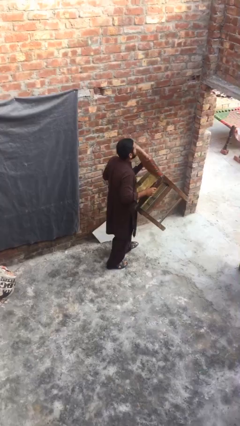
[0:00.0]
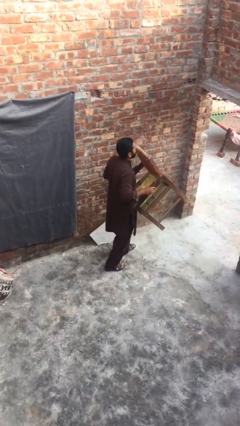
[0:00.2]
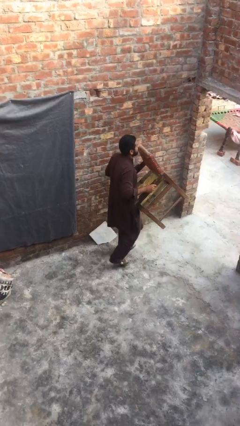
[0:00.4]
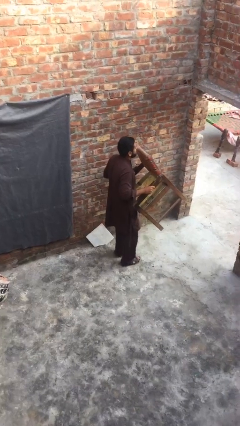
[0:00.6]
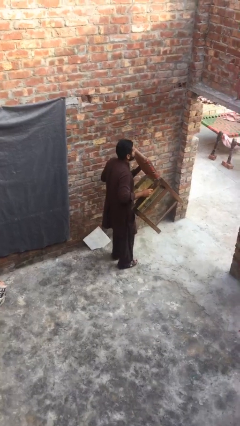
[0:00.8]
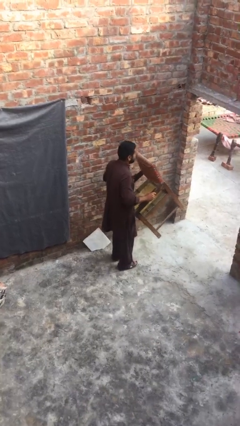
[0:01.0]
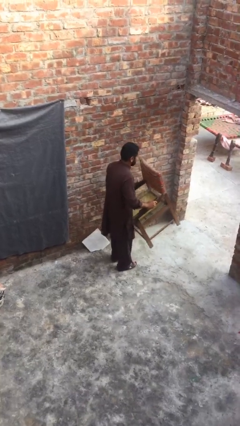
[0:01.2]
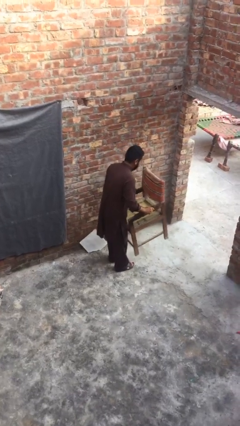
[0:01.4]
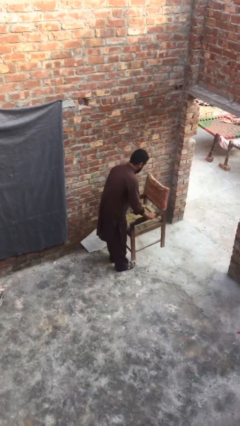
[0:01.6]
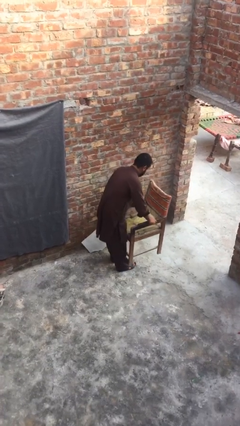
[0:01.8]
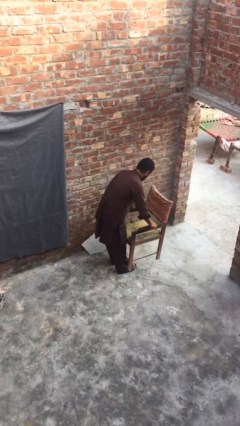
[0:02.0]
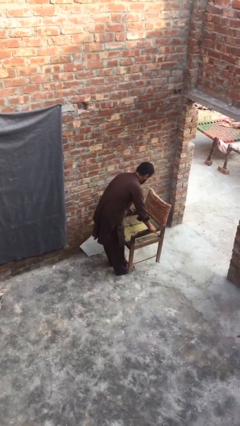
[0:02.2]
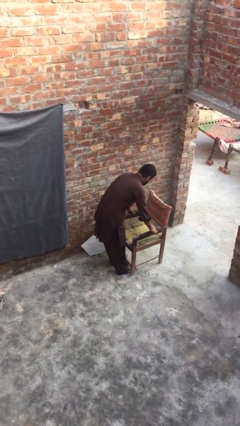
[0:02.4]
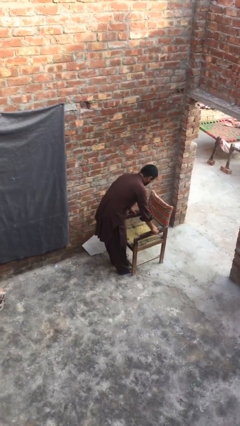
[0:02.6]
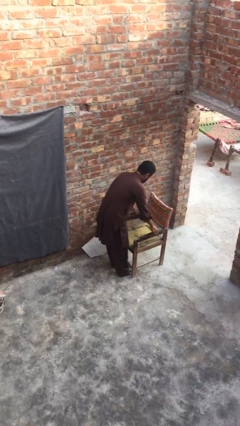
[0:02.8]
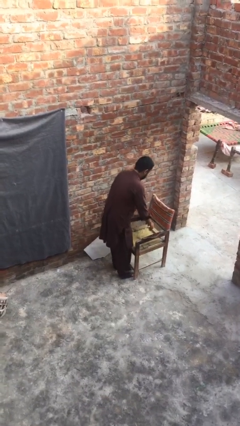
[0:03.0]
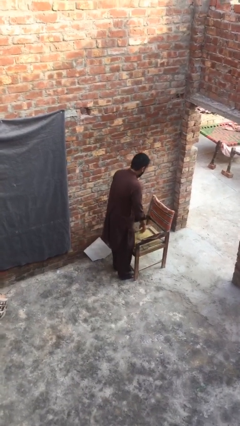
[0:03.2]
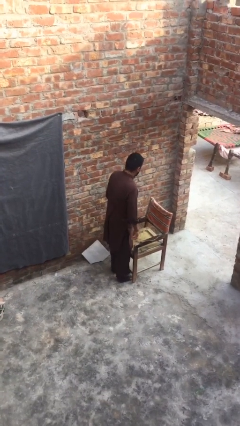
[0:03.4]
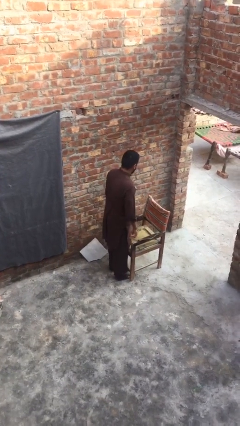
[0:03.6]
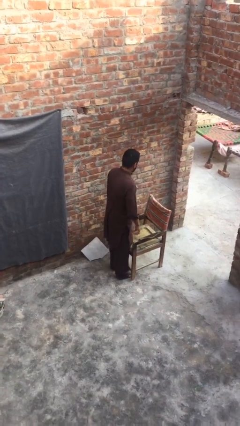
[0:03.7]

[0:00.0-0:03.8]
person puts down object on floor

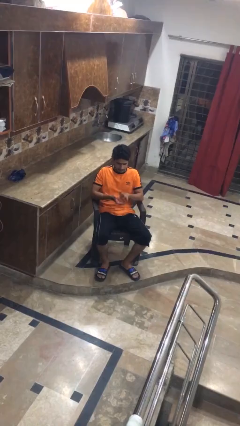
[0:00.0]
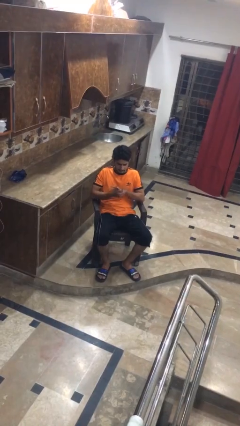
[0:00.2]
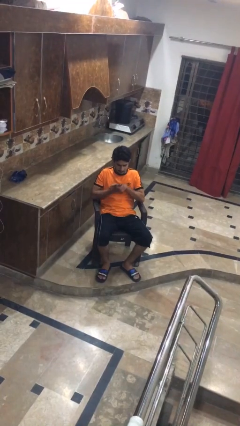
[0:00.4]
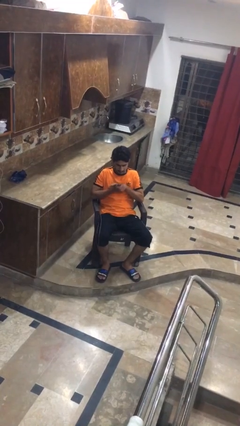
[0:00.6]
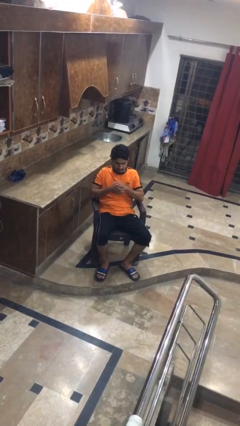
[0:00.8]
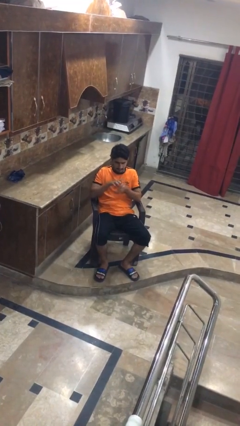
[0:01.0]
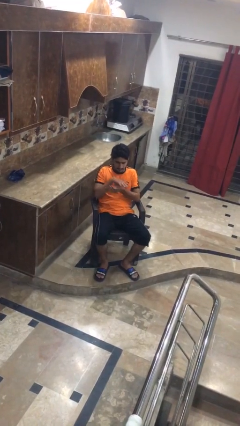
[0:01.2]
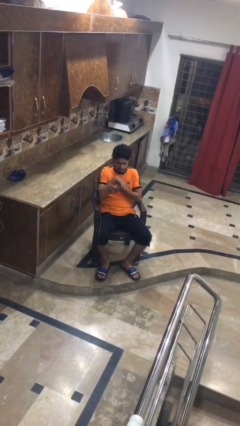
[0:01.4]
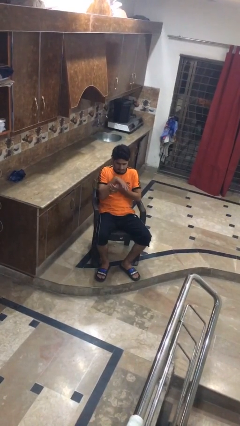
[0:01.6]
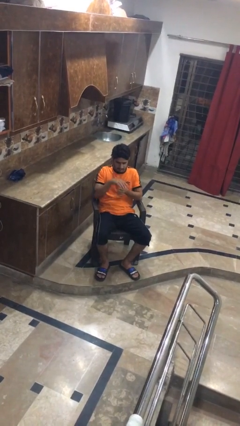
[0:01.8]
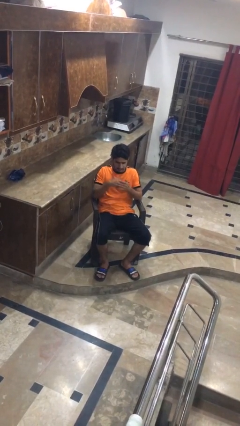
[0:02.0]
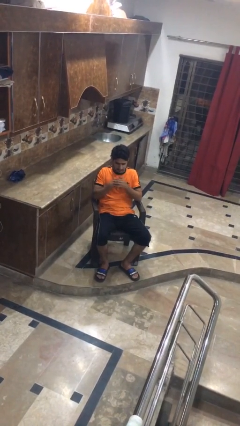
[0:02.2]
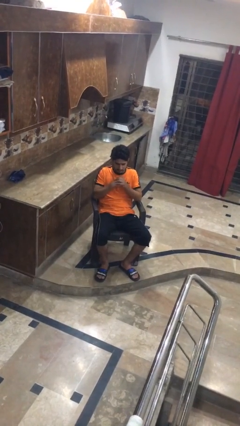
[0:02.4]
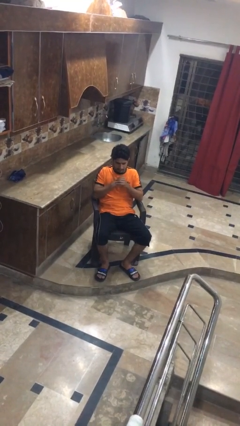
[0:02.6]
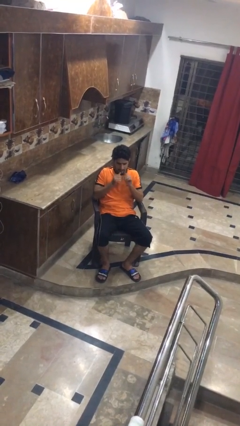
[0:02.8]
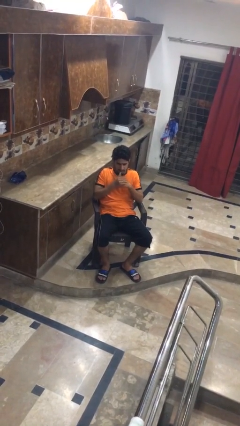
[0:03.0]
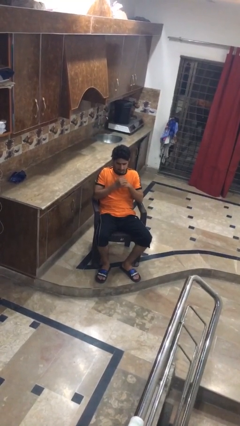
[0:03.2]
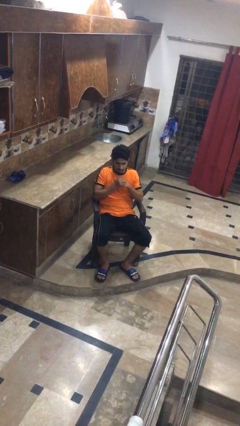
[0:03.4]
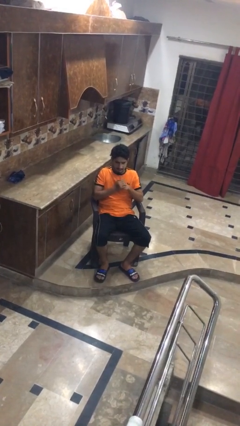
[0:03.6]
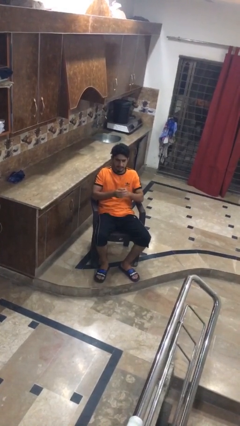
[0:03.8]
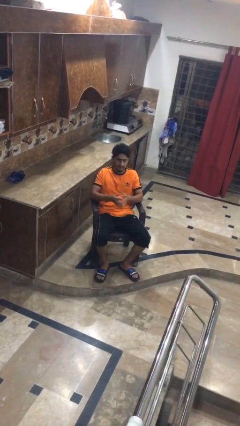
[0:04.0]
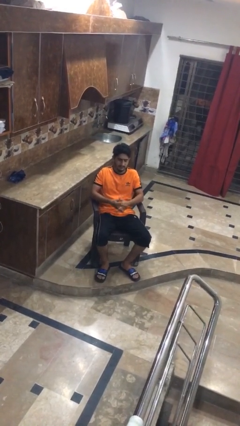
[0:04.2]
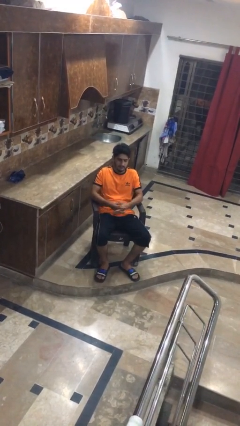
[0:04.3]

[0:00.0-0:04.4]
person cracks knuckles

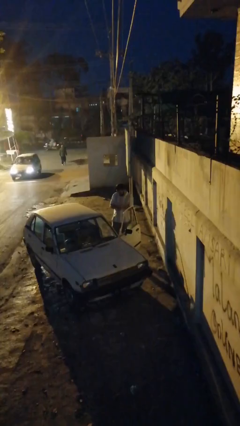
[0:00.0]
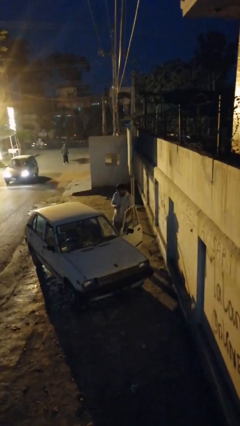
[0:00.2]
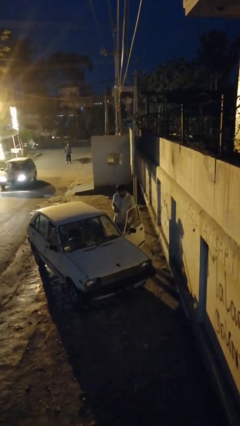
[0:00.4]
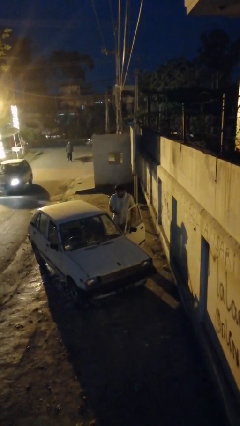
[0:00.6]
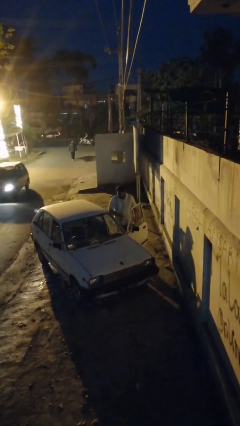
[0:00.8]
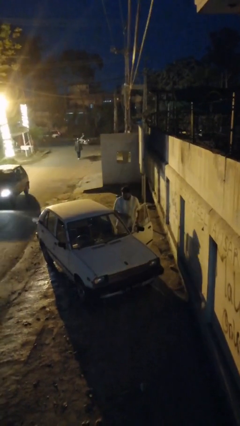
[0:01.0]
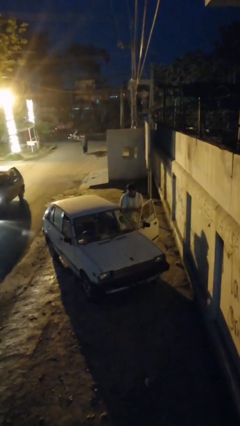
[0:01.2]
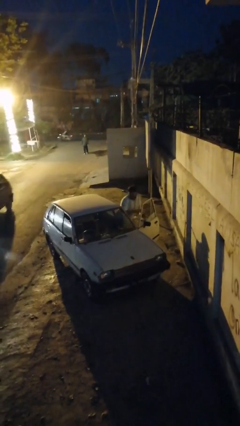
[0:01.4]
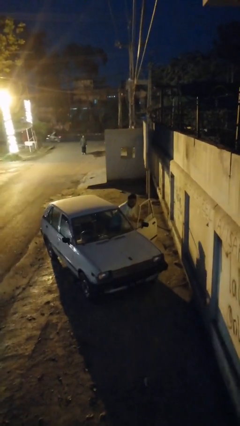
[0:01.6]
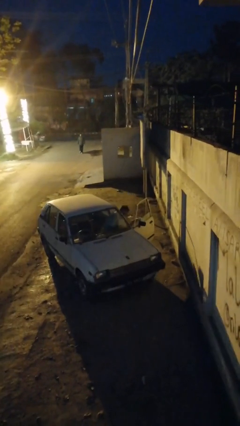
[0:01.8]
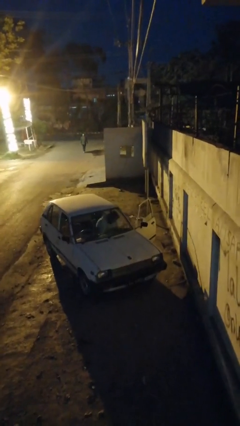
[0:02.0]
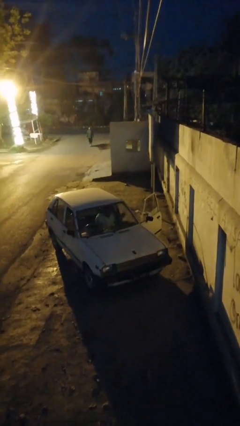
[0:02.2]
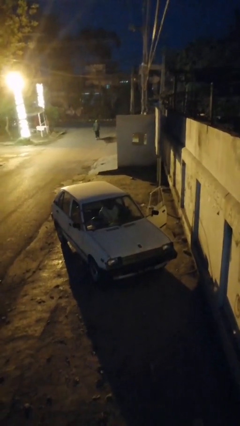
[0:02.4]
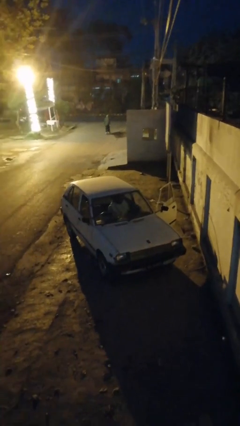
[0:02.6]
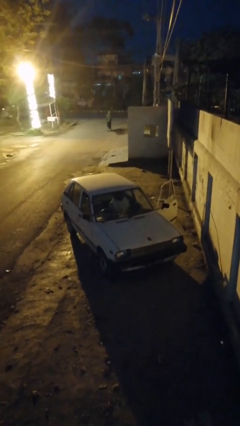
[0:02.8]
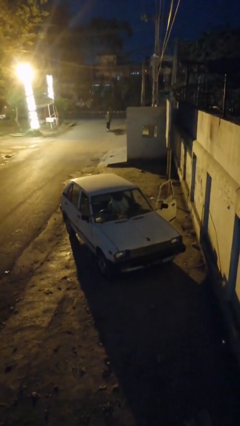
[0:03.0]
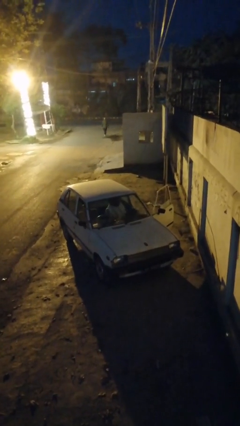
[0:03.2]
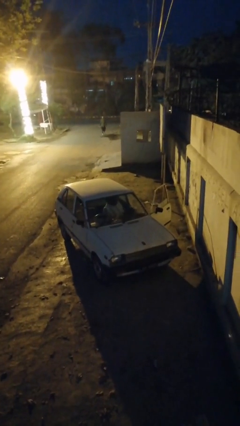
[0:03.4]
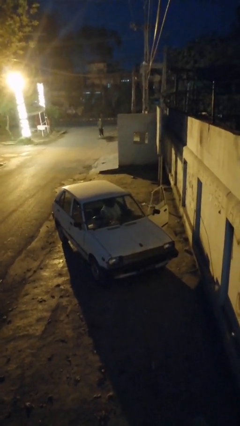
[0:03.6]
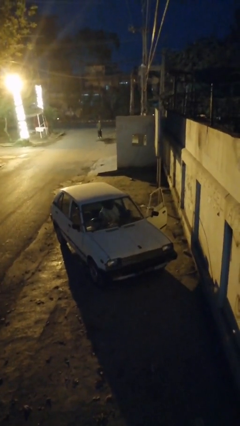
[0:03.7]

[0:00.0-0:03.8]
person enters car

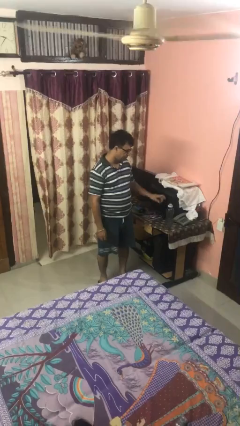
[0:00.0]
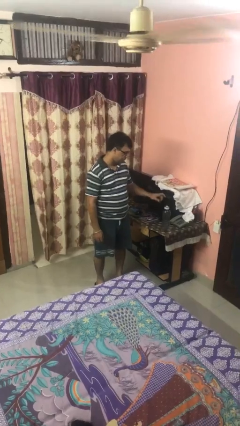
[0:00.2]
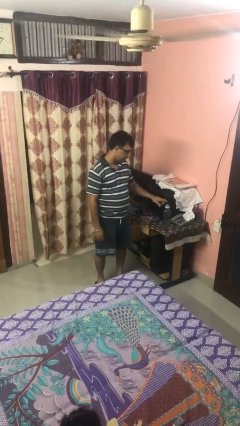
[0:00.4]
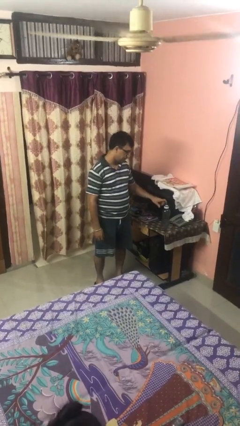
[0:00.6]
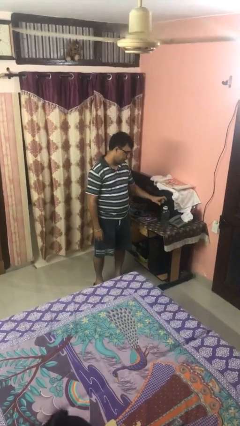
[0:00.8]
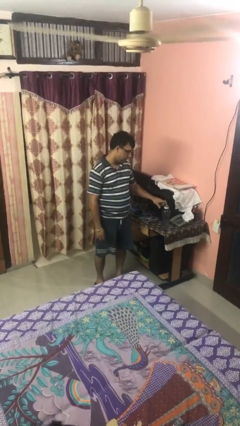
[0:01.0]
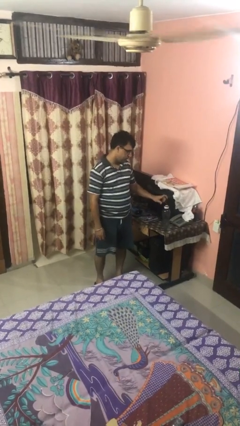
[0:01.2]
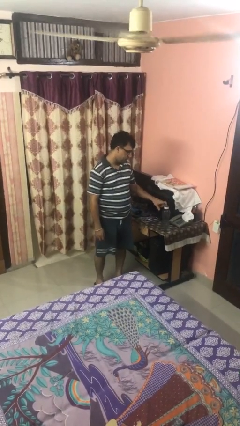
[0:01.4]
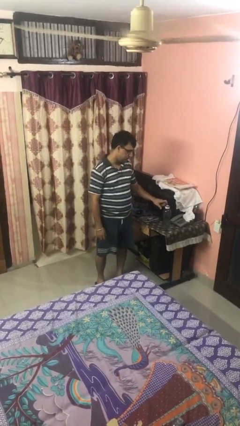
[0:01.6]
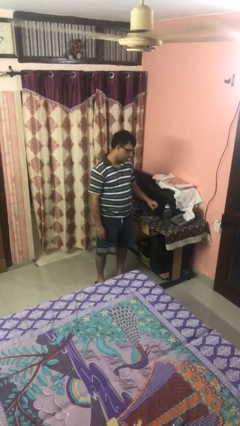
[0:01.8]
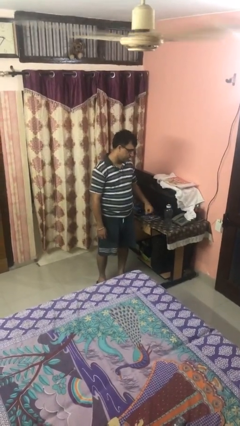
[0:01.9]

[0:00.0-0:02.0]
person taps object with finger

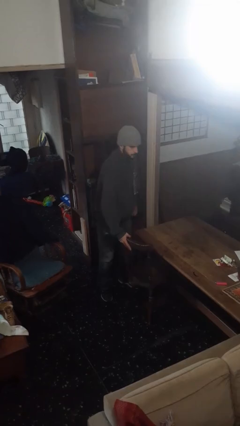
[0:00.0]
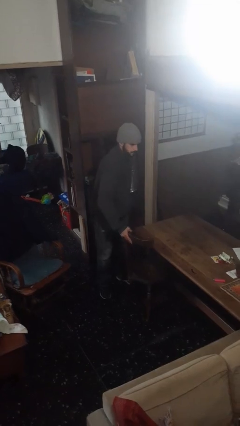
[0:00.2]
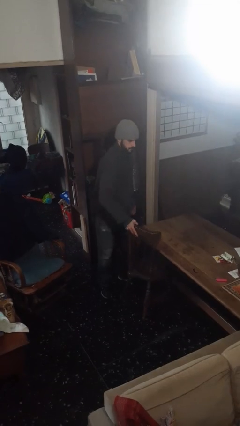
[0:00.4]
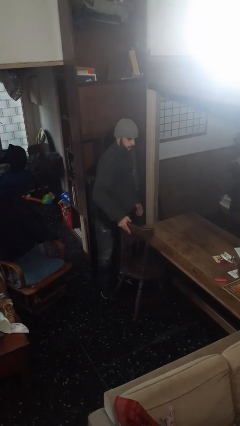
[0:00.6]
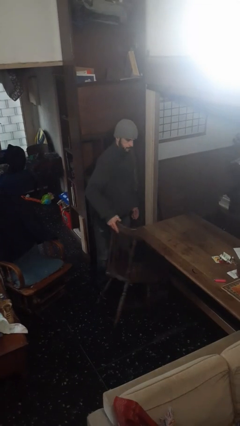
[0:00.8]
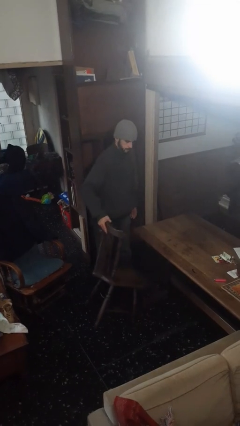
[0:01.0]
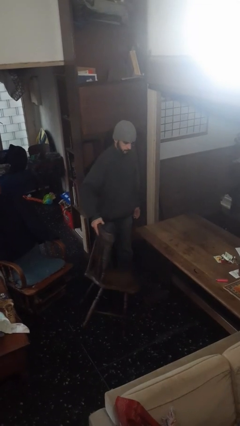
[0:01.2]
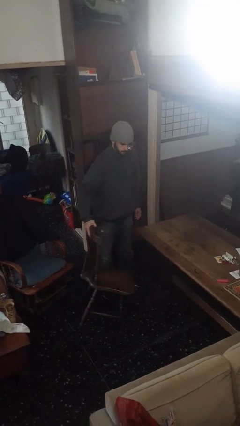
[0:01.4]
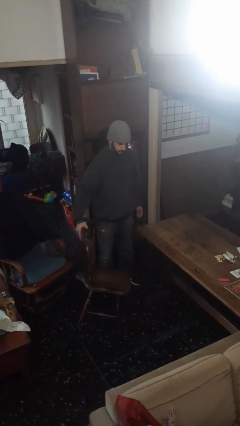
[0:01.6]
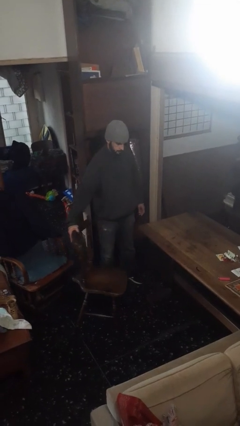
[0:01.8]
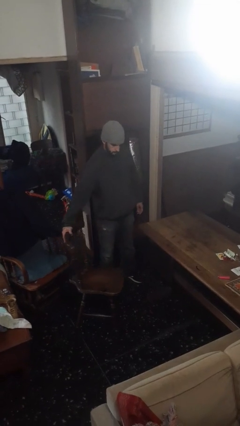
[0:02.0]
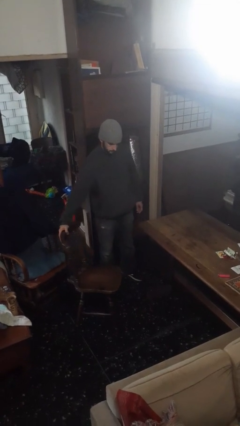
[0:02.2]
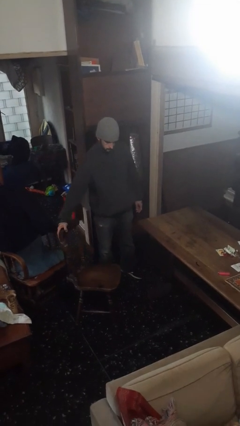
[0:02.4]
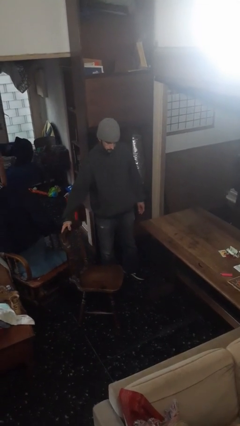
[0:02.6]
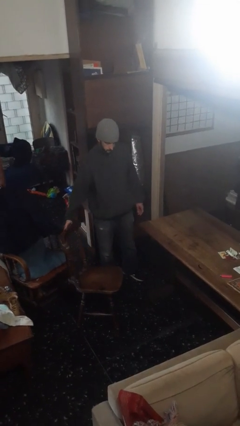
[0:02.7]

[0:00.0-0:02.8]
person pulls out chair

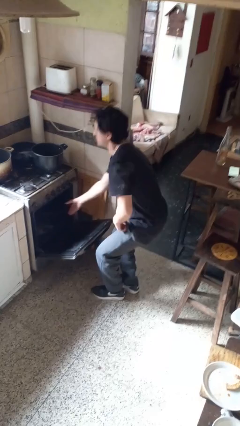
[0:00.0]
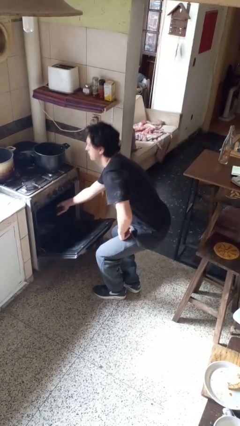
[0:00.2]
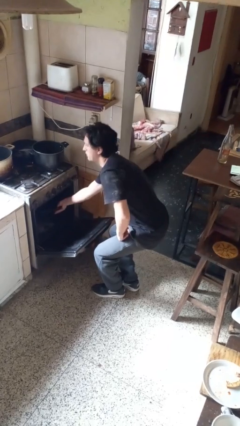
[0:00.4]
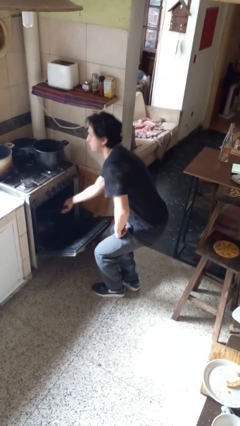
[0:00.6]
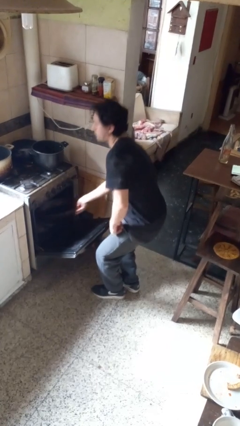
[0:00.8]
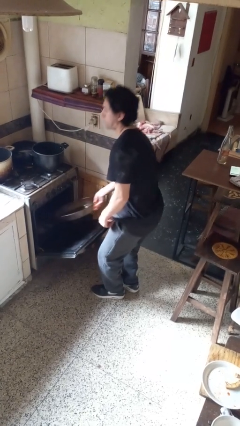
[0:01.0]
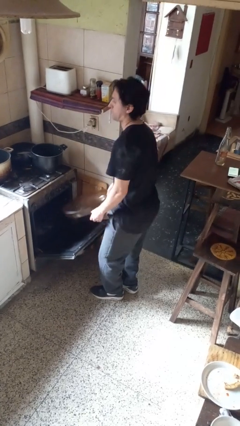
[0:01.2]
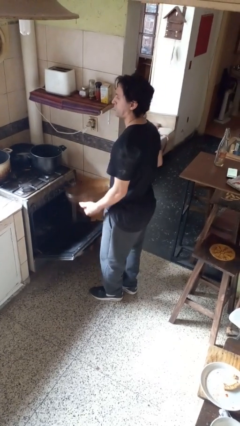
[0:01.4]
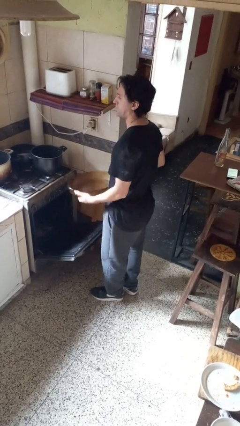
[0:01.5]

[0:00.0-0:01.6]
person takes object from oven
